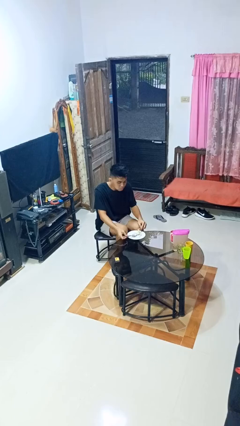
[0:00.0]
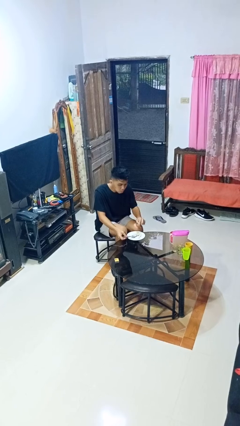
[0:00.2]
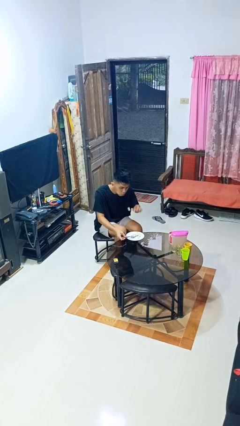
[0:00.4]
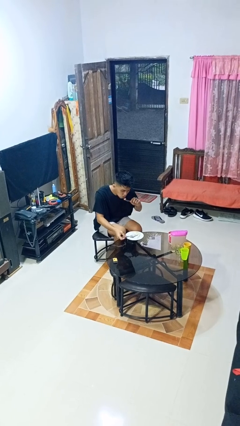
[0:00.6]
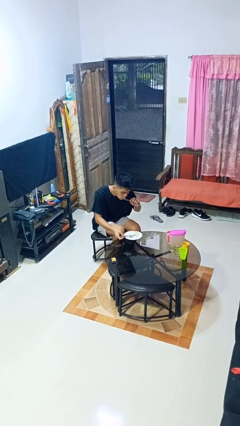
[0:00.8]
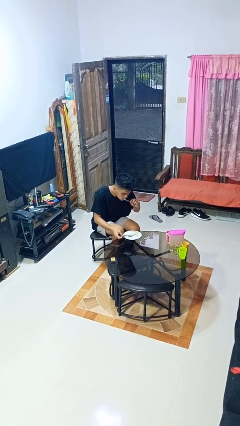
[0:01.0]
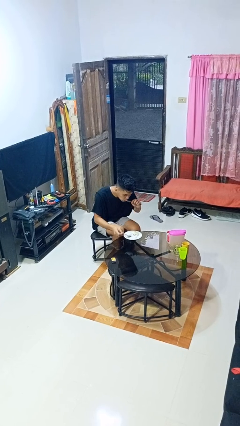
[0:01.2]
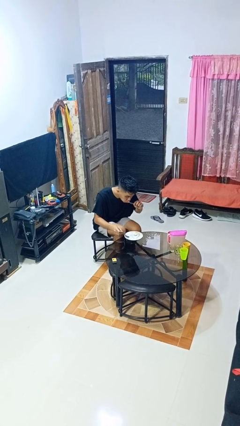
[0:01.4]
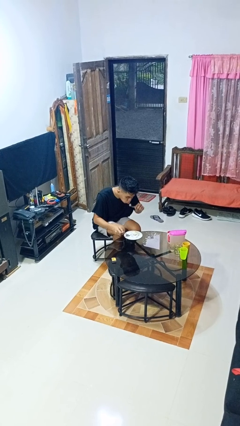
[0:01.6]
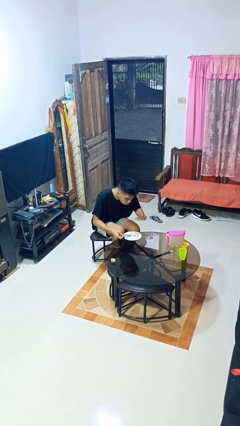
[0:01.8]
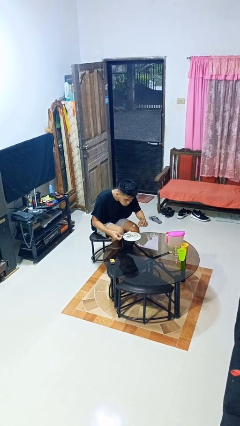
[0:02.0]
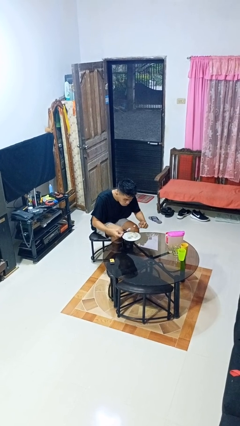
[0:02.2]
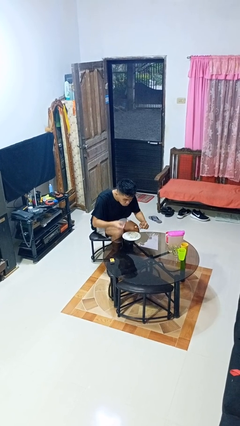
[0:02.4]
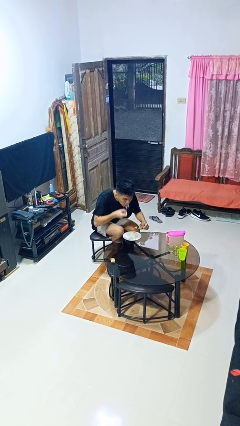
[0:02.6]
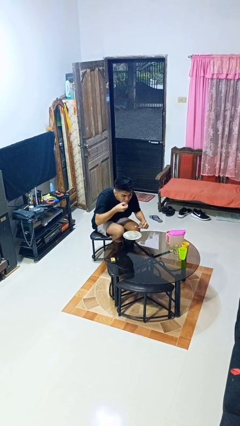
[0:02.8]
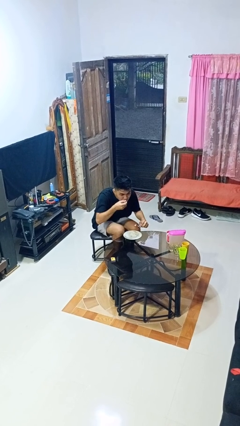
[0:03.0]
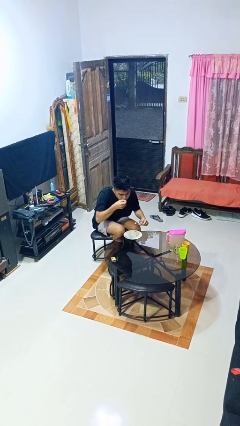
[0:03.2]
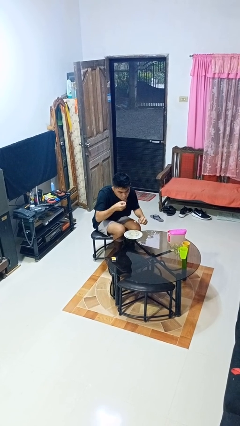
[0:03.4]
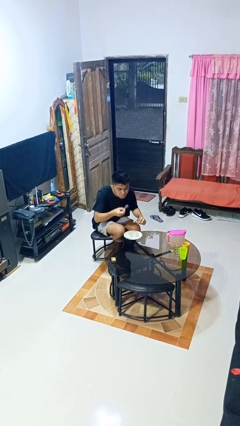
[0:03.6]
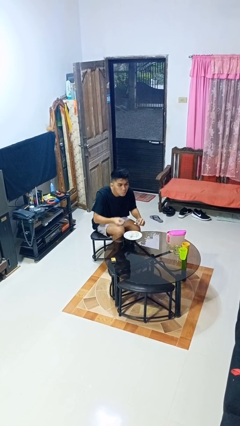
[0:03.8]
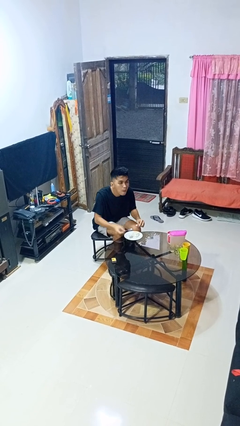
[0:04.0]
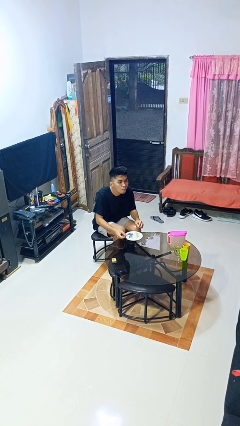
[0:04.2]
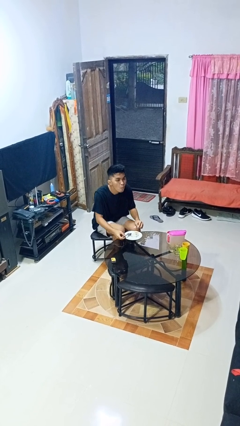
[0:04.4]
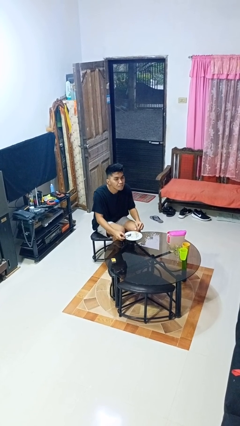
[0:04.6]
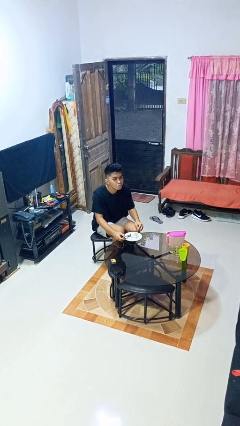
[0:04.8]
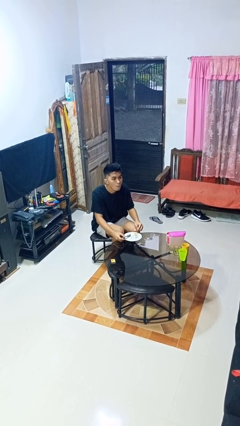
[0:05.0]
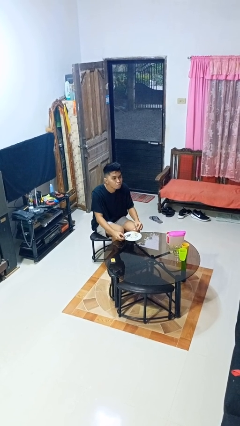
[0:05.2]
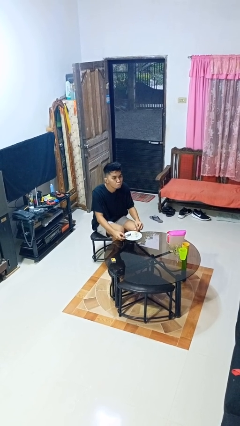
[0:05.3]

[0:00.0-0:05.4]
person eats with utensil

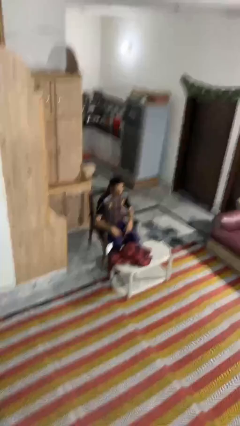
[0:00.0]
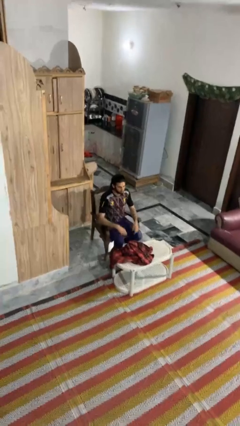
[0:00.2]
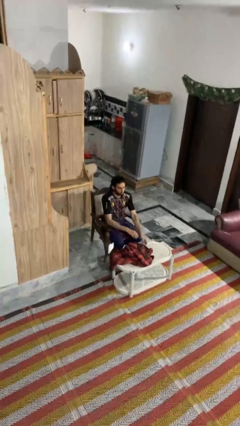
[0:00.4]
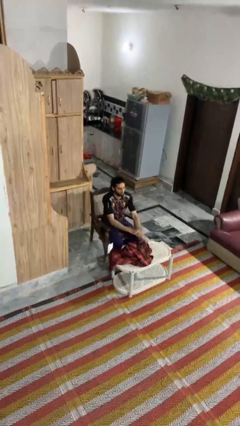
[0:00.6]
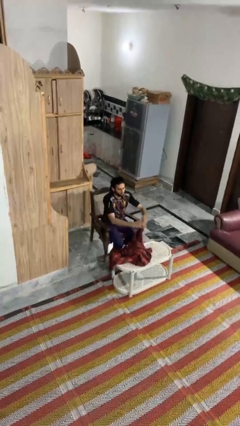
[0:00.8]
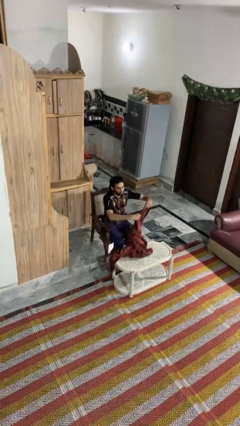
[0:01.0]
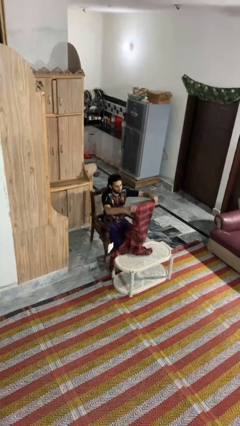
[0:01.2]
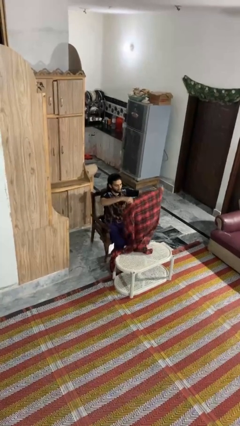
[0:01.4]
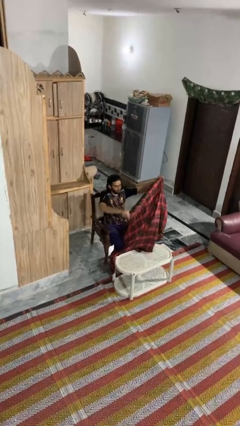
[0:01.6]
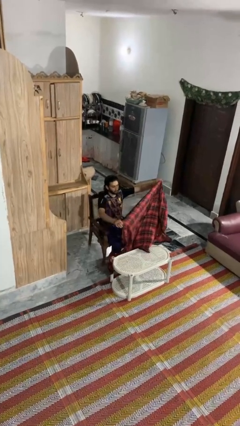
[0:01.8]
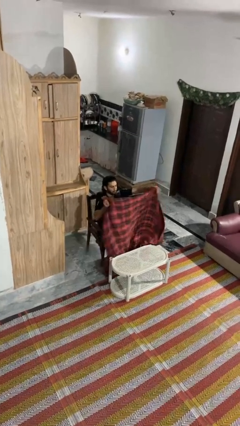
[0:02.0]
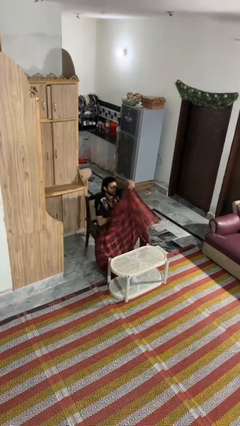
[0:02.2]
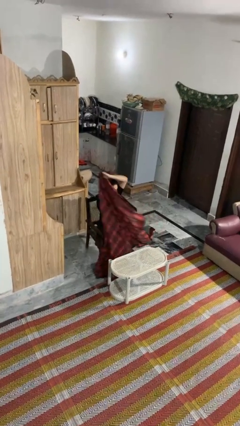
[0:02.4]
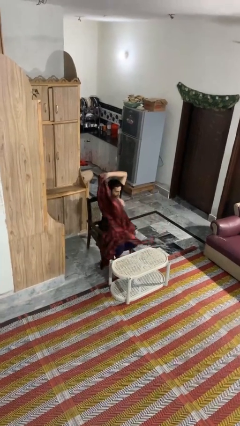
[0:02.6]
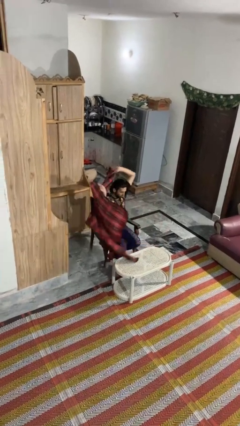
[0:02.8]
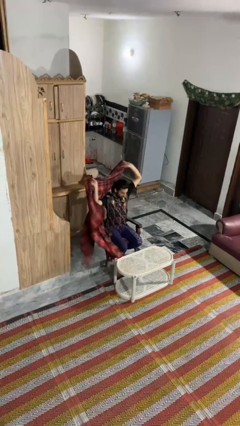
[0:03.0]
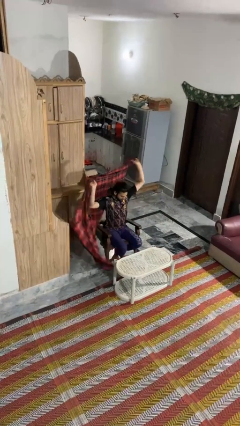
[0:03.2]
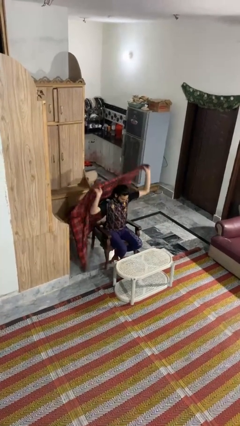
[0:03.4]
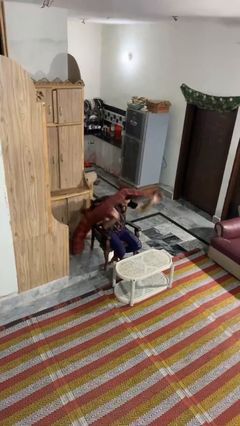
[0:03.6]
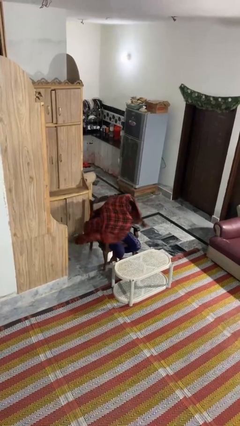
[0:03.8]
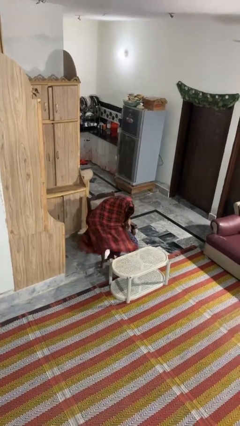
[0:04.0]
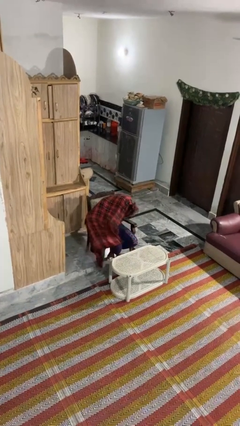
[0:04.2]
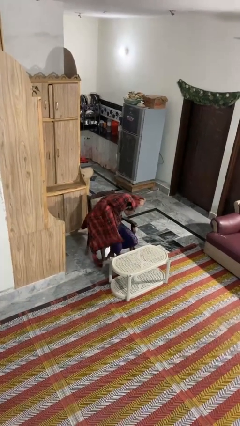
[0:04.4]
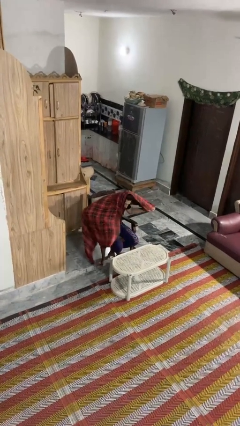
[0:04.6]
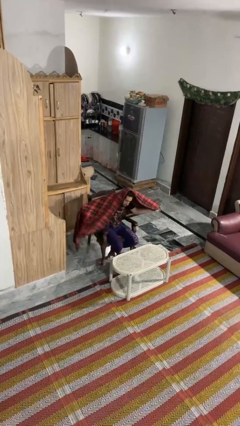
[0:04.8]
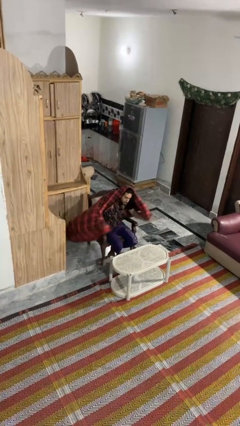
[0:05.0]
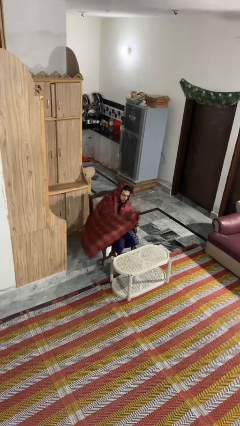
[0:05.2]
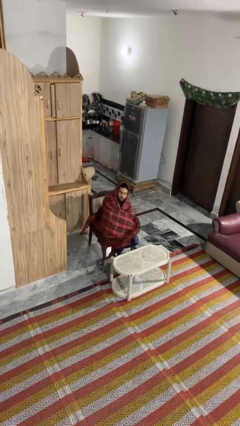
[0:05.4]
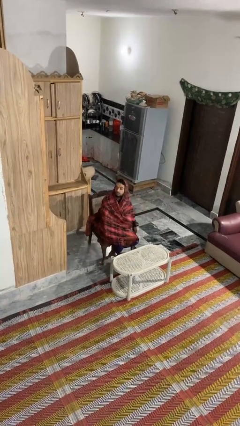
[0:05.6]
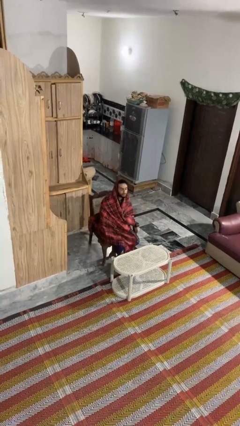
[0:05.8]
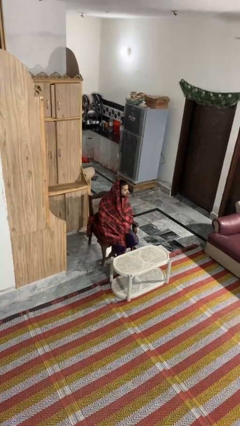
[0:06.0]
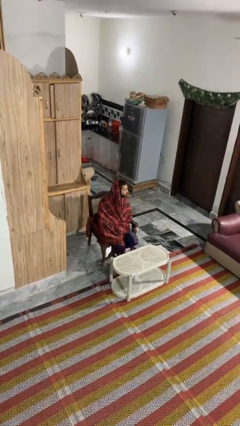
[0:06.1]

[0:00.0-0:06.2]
person covers with blanket

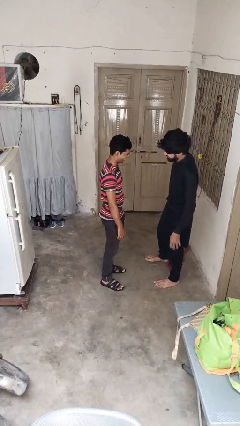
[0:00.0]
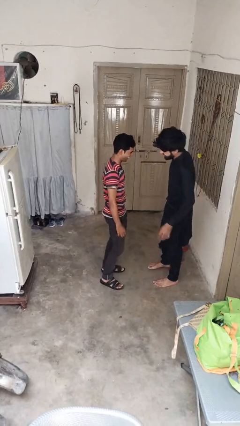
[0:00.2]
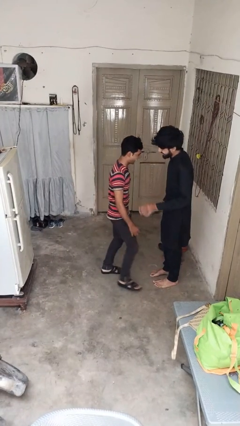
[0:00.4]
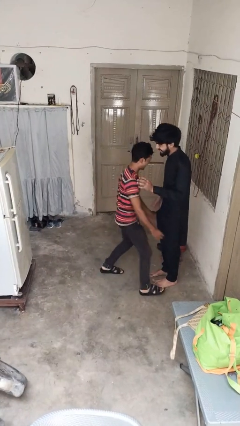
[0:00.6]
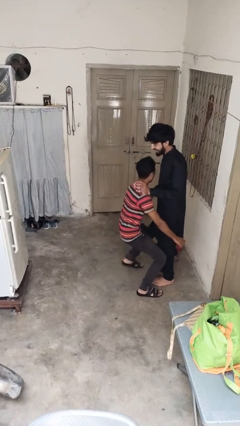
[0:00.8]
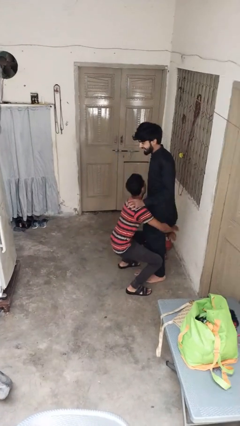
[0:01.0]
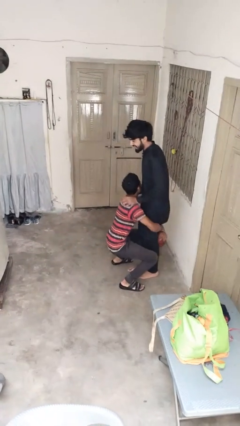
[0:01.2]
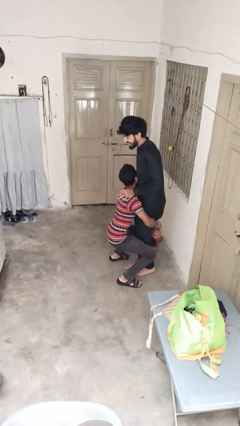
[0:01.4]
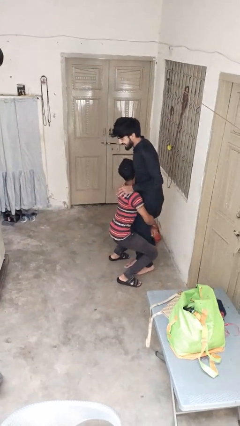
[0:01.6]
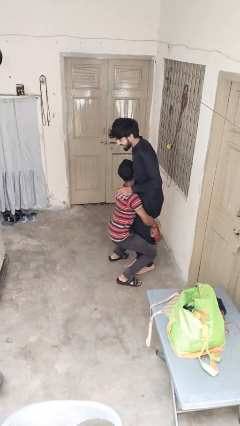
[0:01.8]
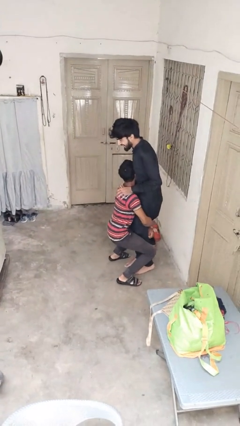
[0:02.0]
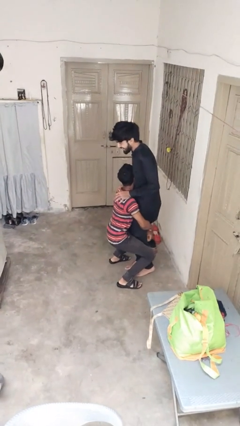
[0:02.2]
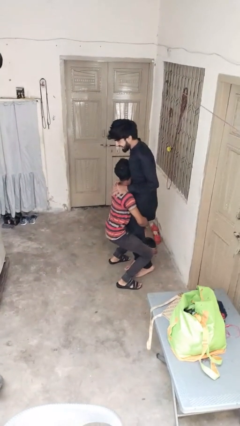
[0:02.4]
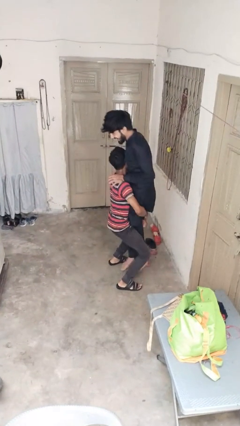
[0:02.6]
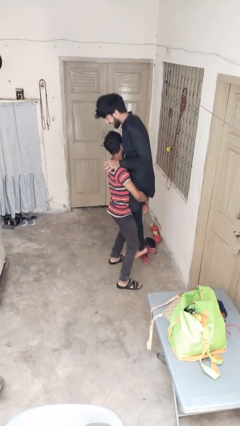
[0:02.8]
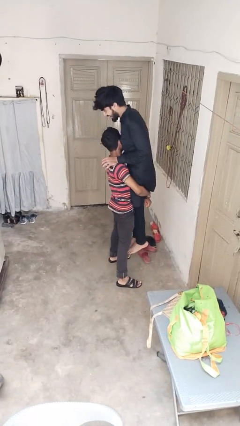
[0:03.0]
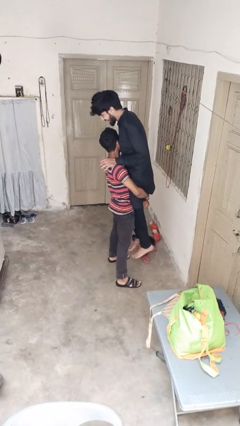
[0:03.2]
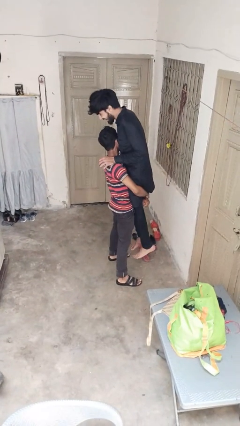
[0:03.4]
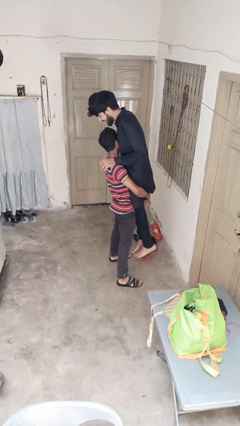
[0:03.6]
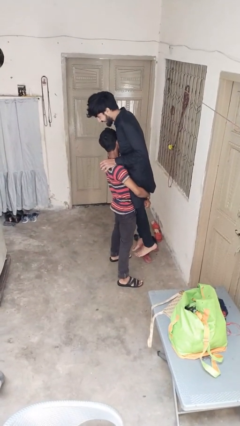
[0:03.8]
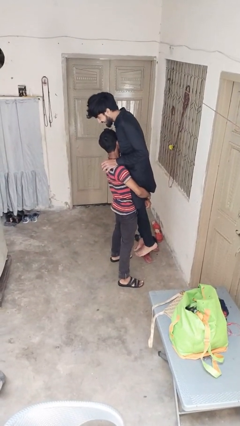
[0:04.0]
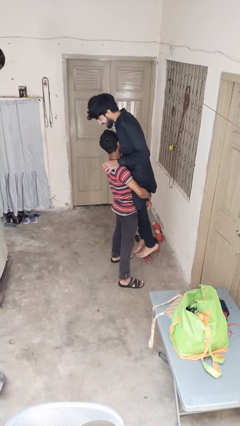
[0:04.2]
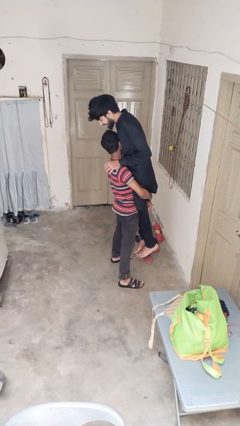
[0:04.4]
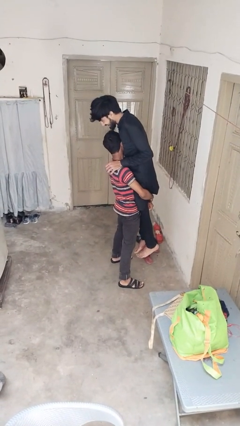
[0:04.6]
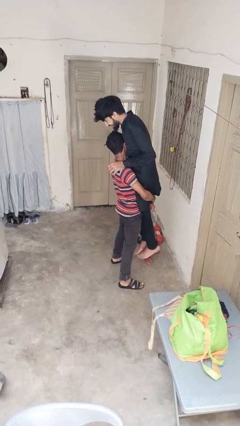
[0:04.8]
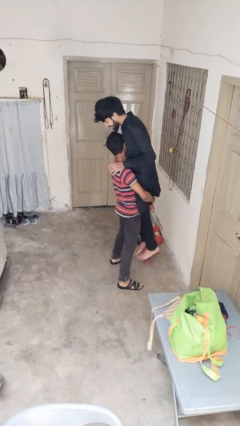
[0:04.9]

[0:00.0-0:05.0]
person picks up person

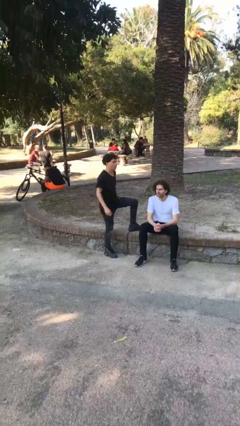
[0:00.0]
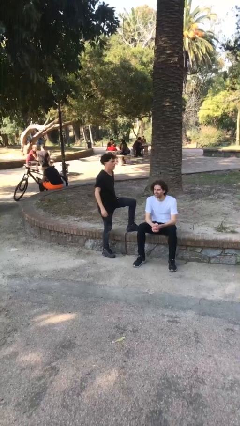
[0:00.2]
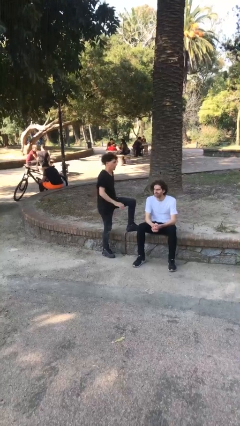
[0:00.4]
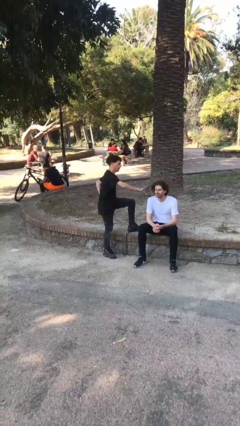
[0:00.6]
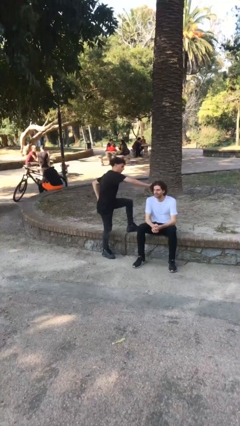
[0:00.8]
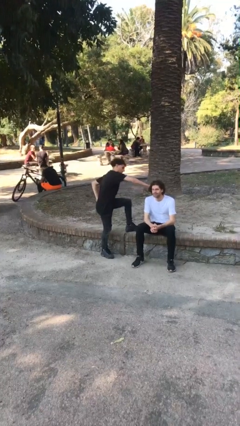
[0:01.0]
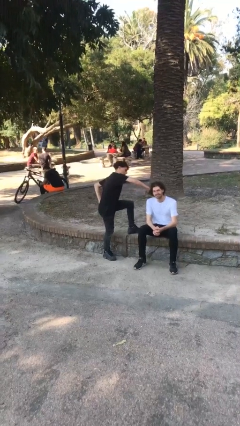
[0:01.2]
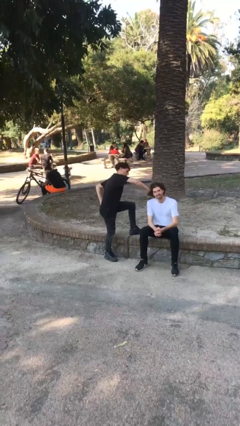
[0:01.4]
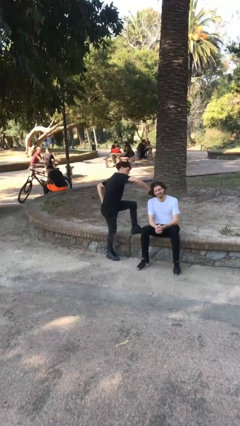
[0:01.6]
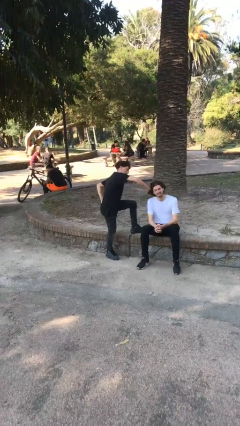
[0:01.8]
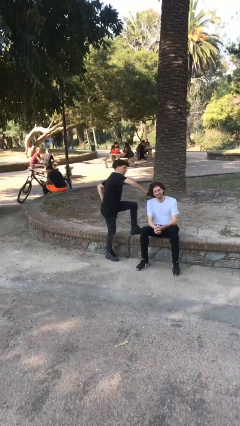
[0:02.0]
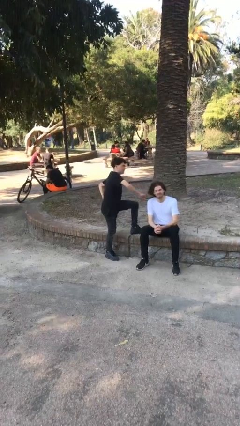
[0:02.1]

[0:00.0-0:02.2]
person grabs person by hair
